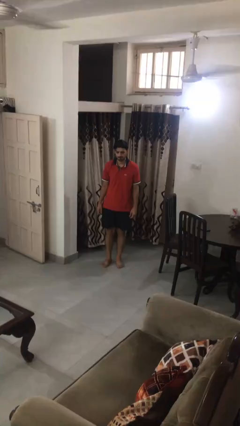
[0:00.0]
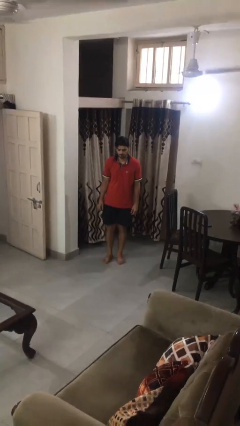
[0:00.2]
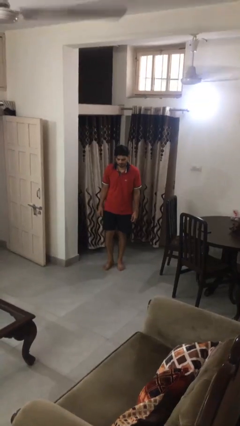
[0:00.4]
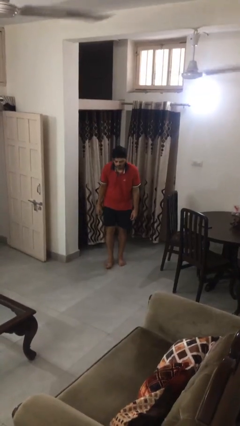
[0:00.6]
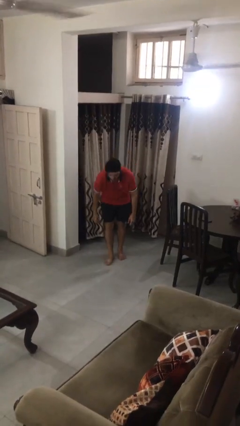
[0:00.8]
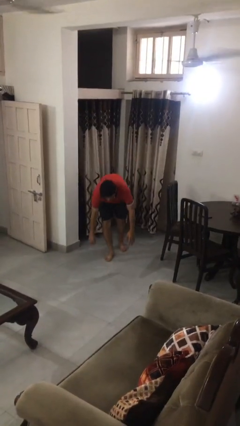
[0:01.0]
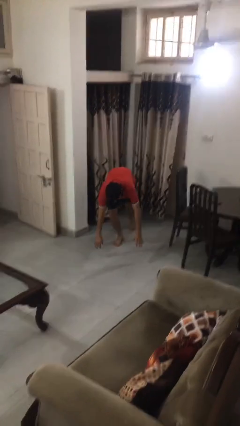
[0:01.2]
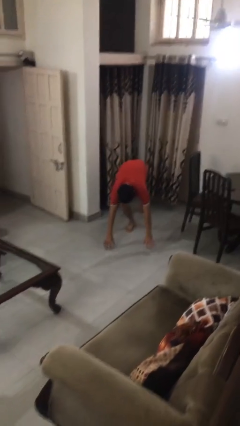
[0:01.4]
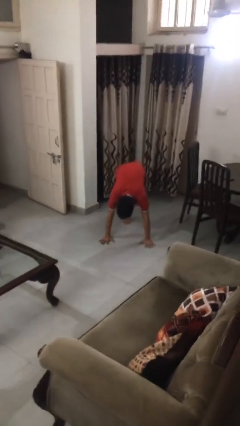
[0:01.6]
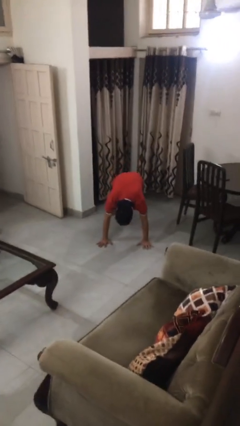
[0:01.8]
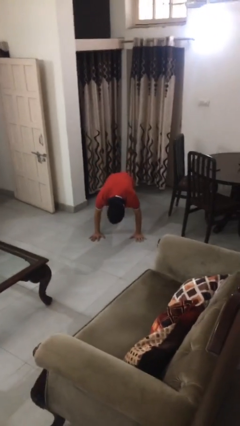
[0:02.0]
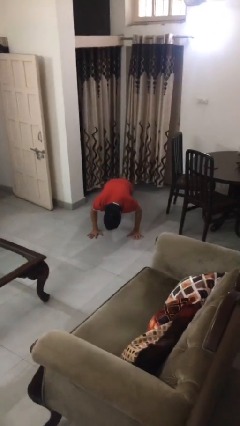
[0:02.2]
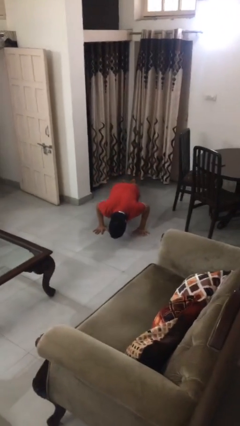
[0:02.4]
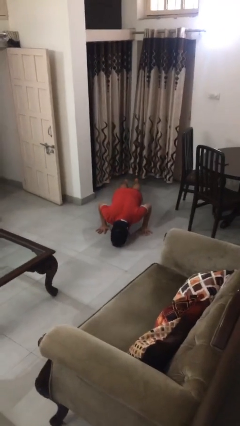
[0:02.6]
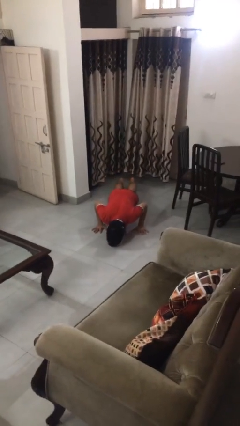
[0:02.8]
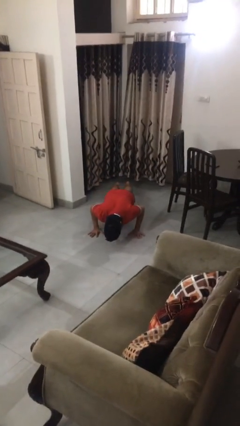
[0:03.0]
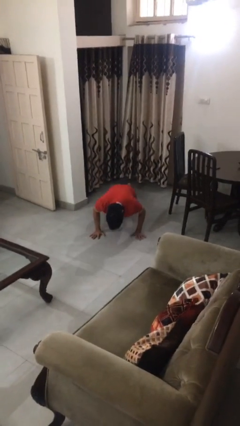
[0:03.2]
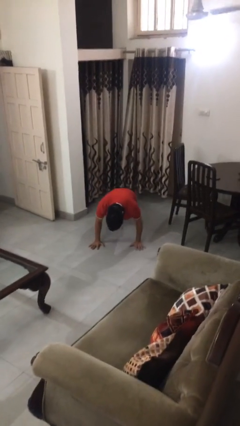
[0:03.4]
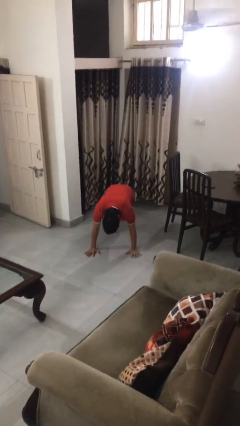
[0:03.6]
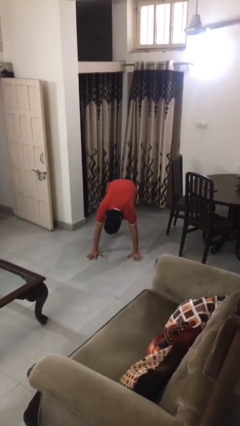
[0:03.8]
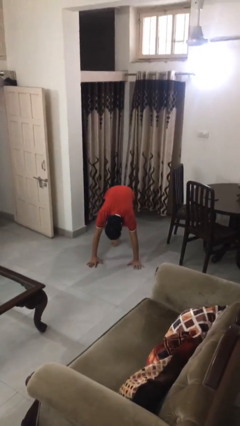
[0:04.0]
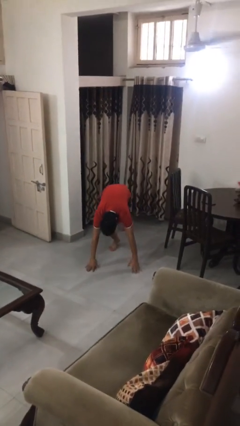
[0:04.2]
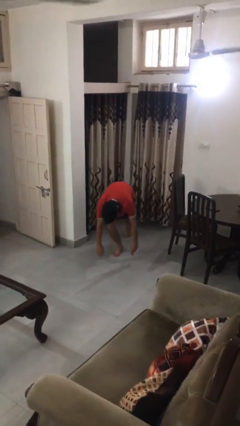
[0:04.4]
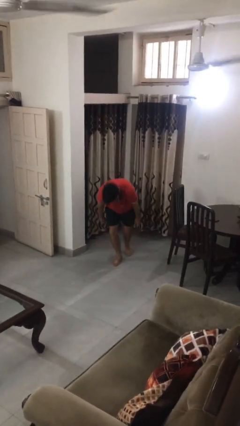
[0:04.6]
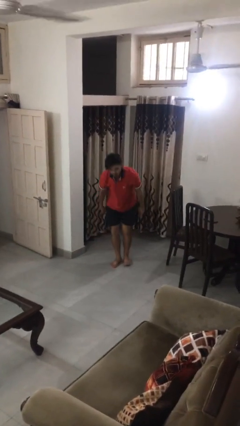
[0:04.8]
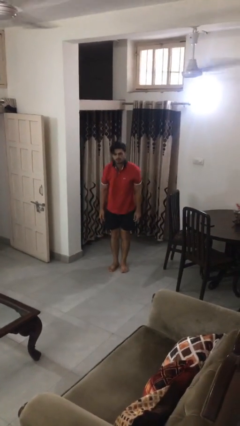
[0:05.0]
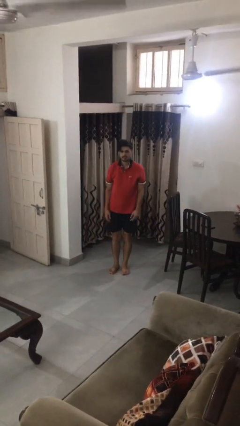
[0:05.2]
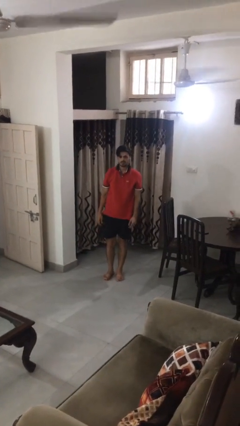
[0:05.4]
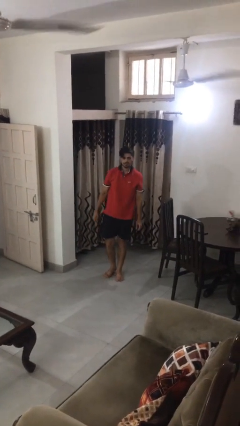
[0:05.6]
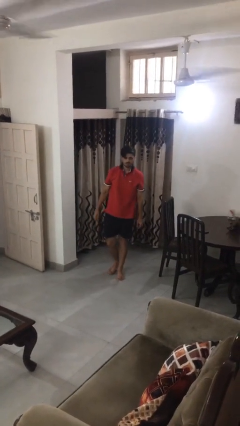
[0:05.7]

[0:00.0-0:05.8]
person exercises with pushup

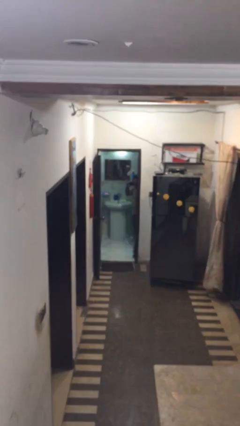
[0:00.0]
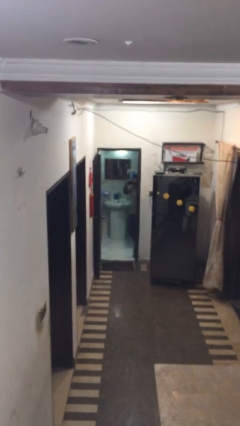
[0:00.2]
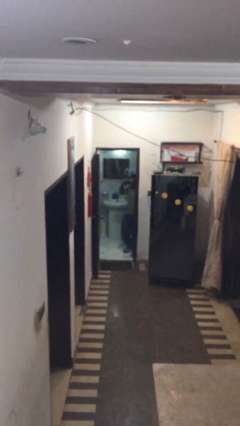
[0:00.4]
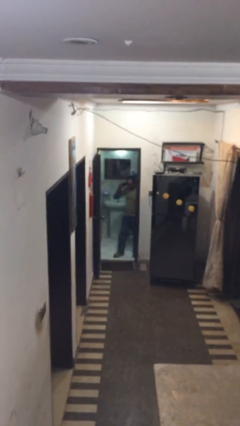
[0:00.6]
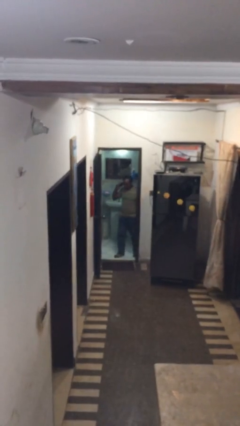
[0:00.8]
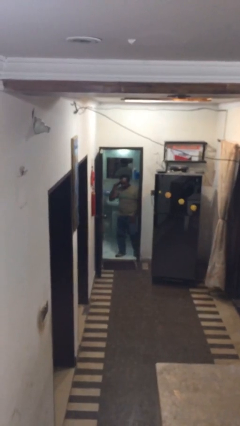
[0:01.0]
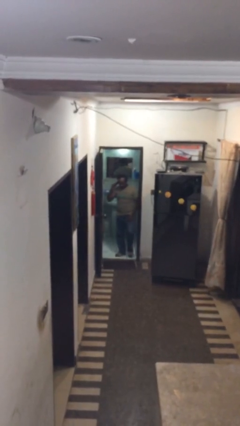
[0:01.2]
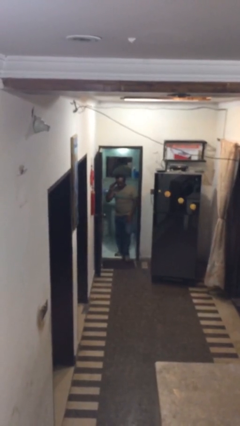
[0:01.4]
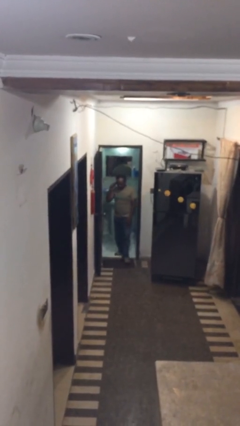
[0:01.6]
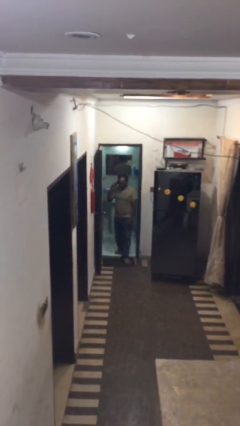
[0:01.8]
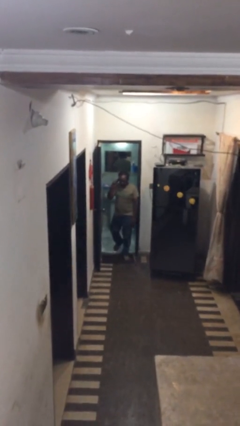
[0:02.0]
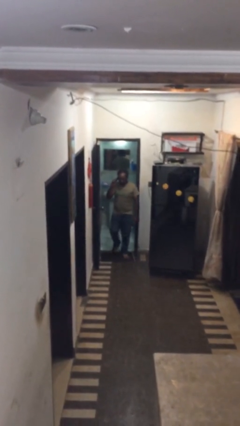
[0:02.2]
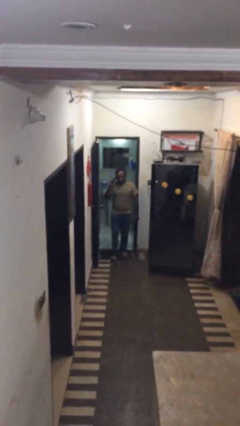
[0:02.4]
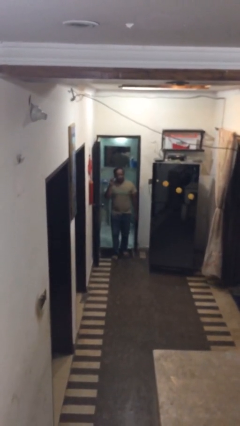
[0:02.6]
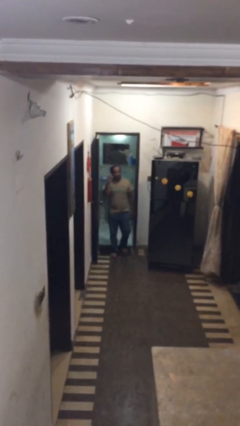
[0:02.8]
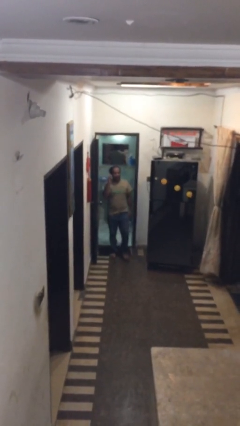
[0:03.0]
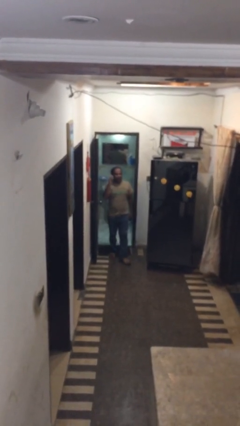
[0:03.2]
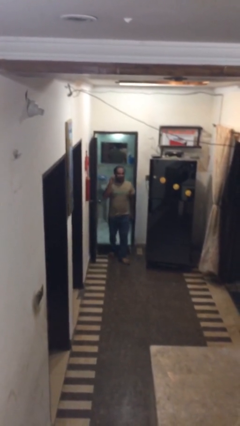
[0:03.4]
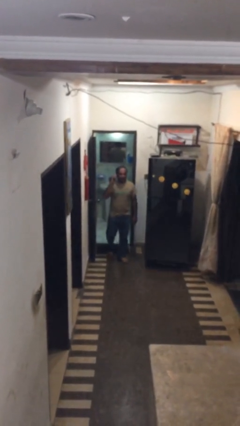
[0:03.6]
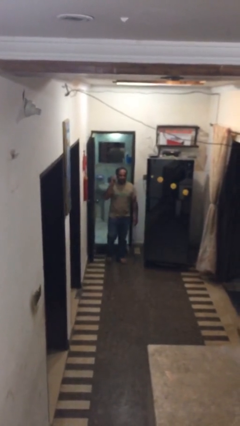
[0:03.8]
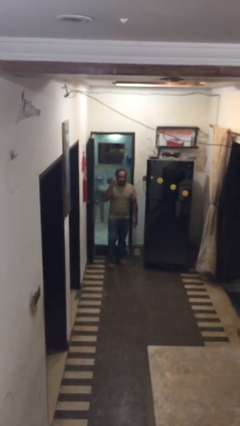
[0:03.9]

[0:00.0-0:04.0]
person enters scene through structure

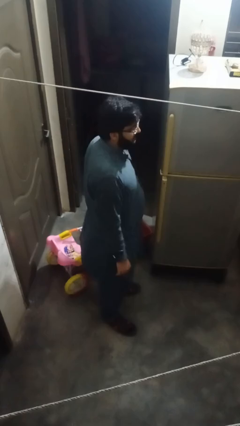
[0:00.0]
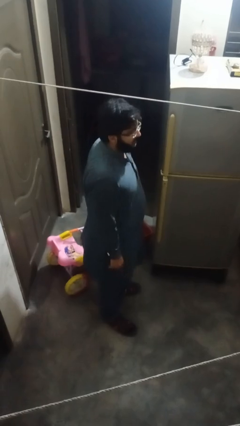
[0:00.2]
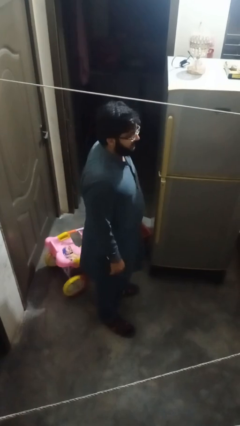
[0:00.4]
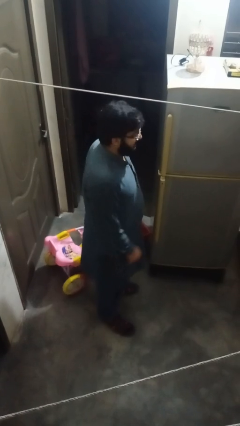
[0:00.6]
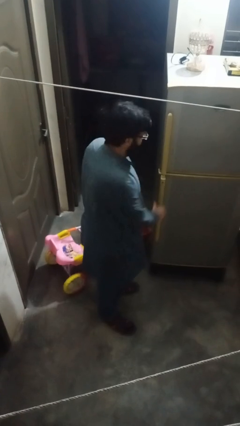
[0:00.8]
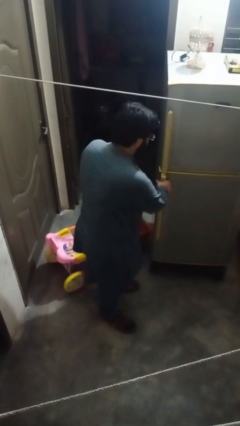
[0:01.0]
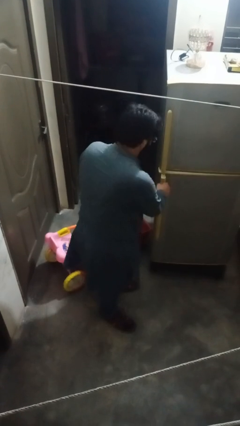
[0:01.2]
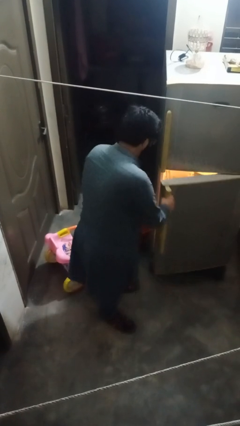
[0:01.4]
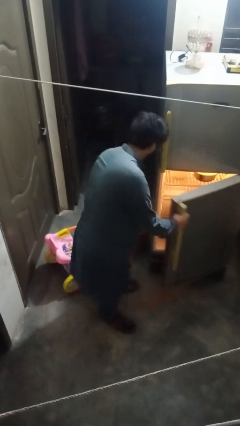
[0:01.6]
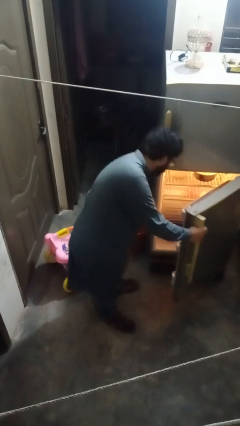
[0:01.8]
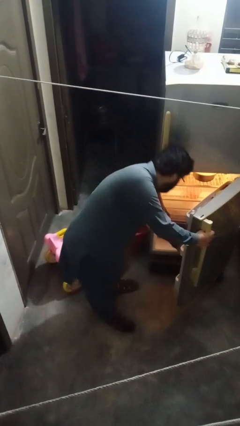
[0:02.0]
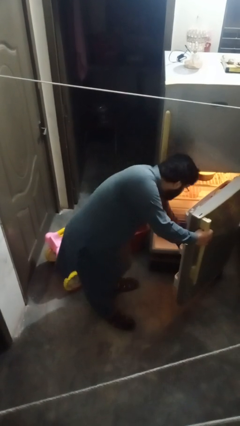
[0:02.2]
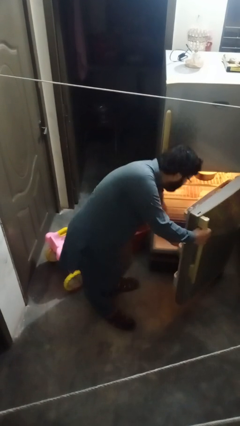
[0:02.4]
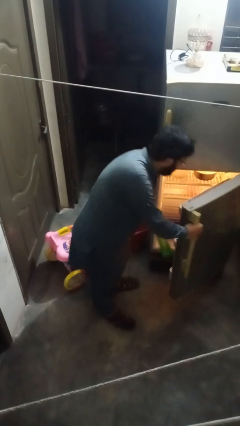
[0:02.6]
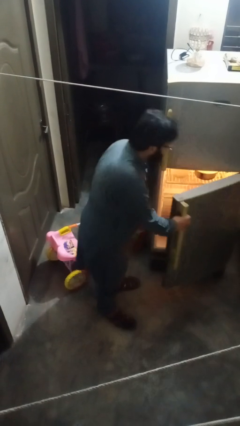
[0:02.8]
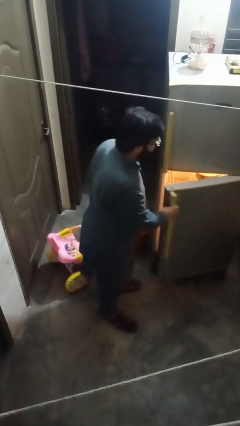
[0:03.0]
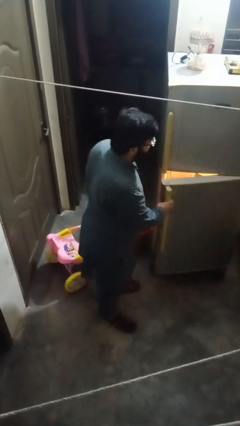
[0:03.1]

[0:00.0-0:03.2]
person takes object from refrigerator

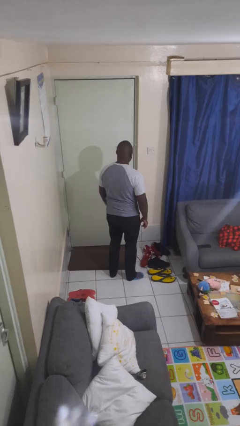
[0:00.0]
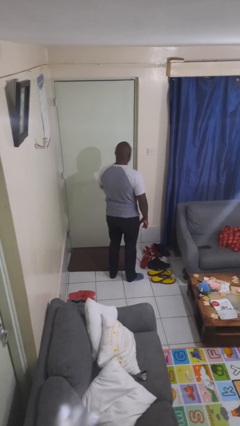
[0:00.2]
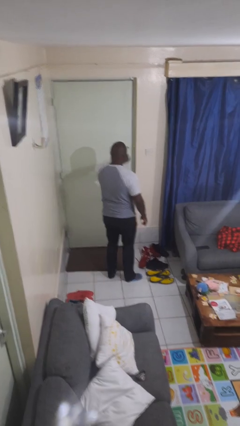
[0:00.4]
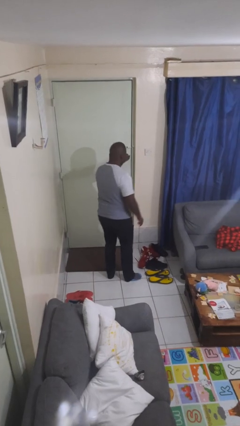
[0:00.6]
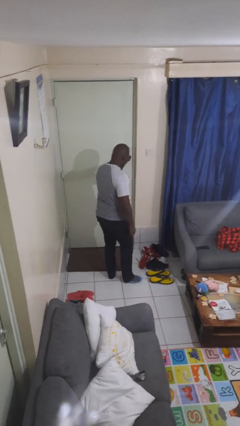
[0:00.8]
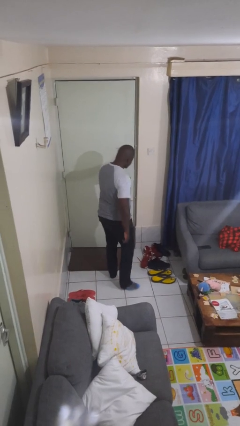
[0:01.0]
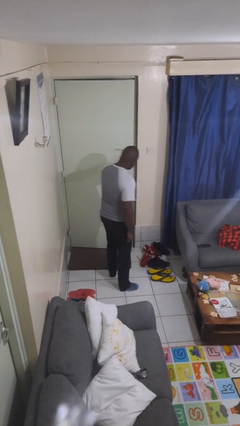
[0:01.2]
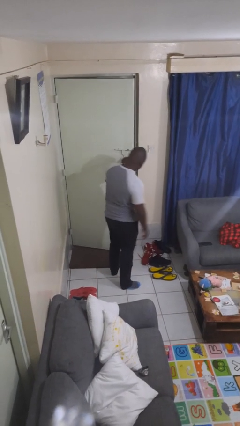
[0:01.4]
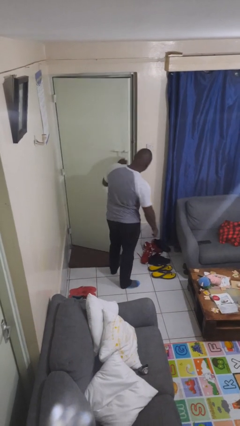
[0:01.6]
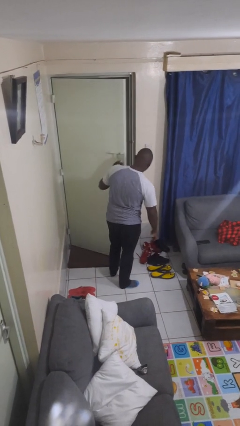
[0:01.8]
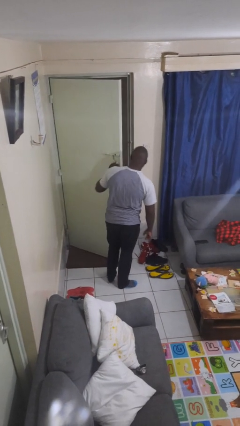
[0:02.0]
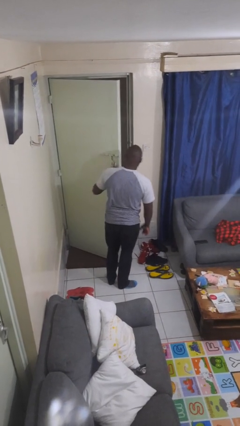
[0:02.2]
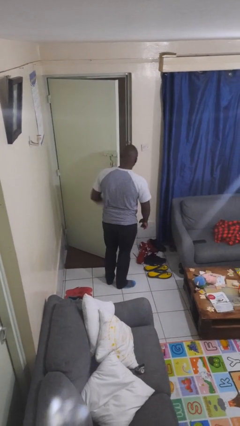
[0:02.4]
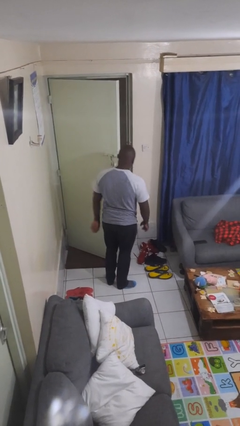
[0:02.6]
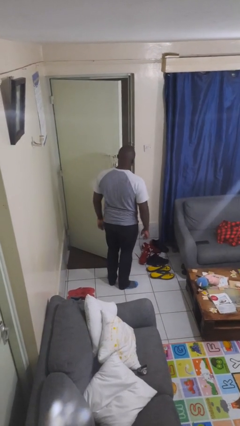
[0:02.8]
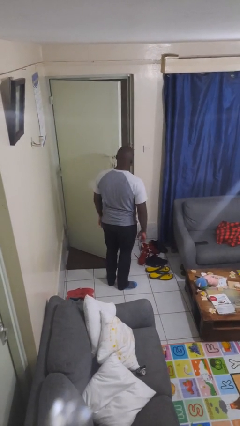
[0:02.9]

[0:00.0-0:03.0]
person opens facility door
